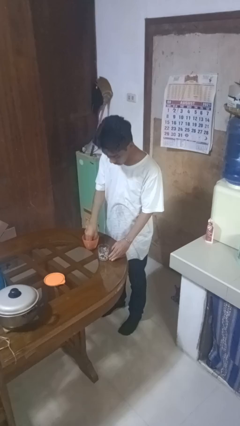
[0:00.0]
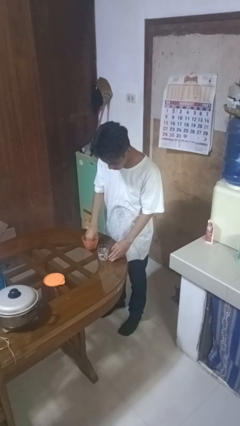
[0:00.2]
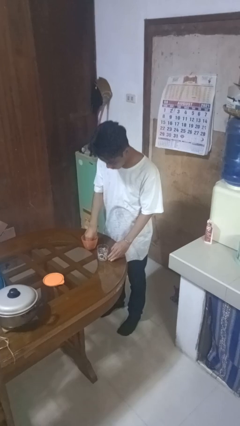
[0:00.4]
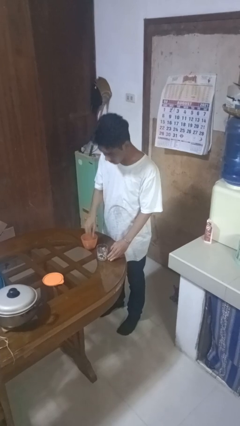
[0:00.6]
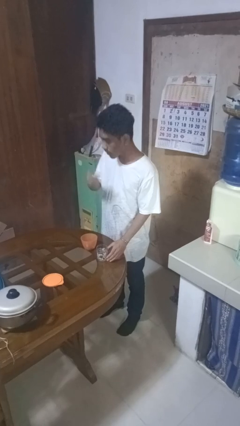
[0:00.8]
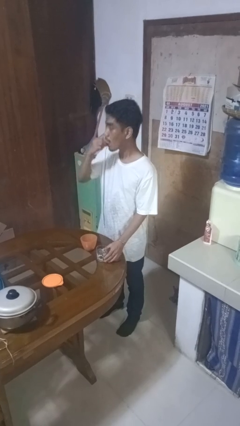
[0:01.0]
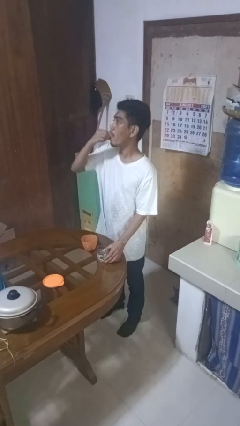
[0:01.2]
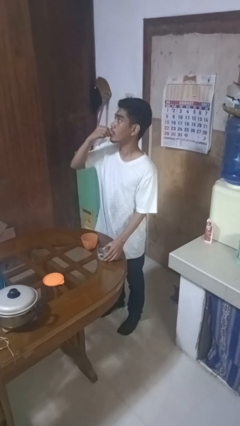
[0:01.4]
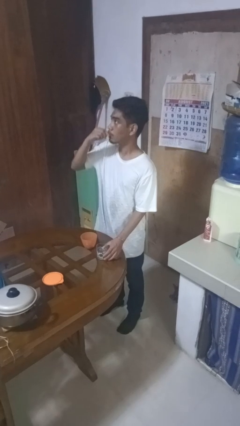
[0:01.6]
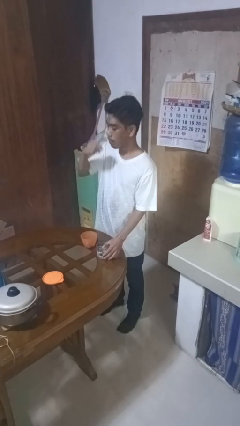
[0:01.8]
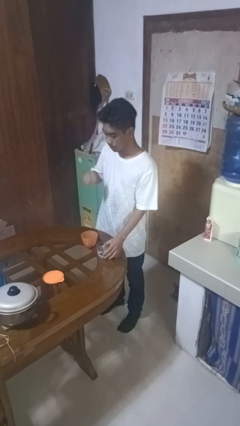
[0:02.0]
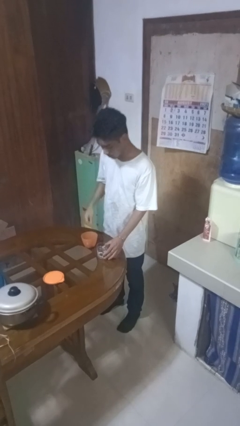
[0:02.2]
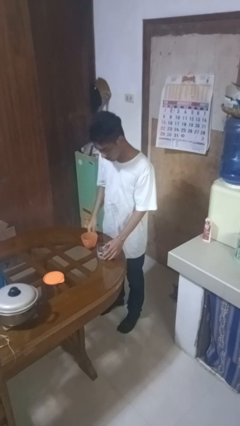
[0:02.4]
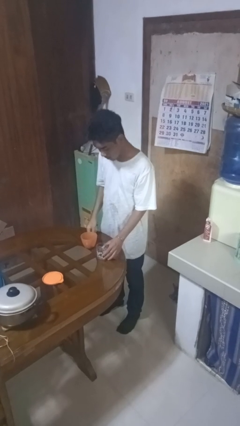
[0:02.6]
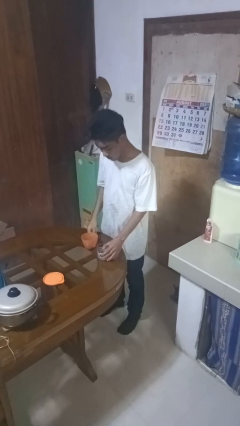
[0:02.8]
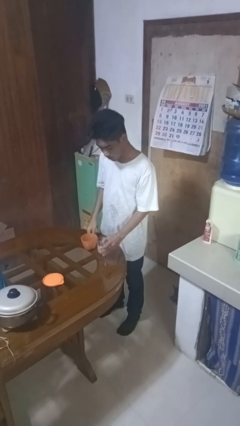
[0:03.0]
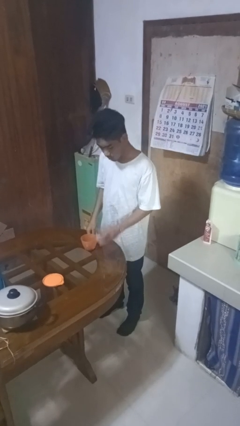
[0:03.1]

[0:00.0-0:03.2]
person takes medicine pills

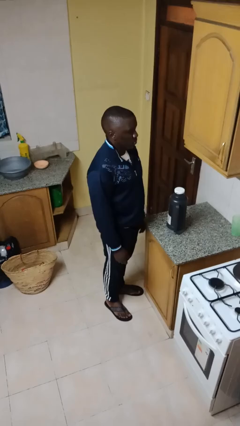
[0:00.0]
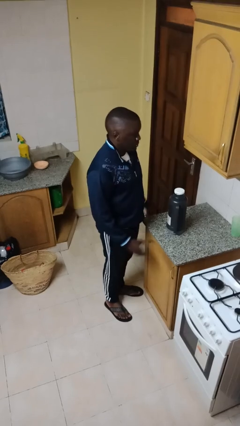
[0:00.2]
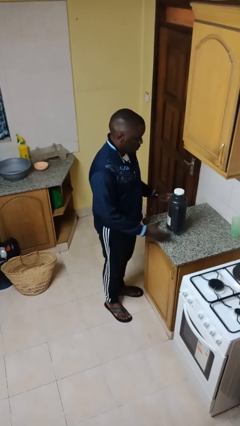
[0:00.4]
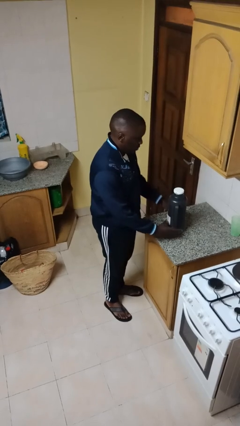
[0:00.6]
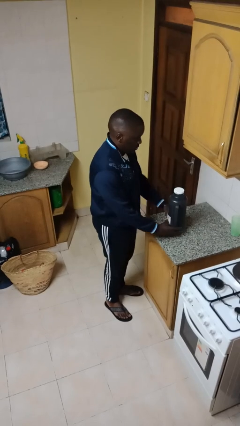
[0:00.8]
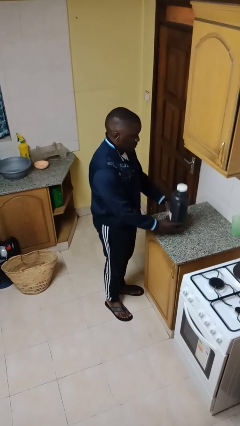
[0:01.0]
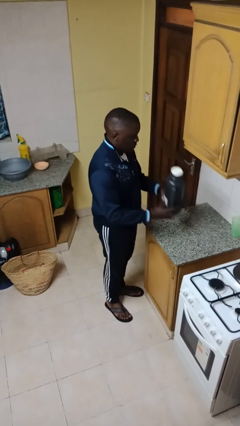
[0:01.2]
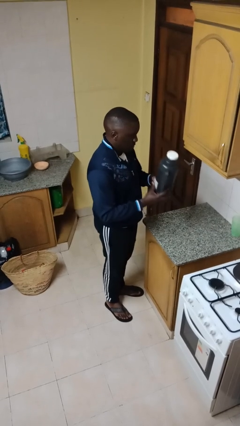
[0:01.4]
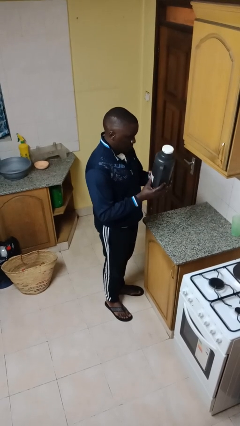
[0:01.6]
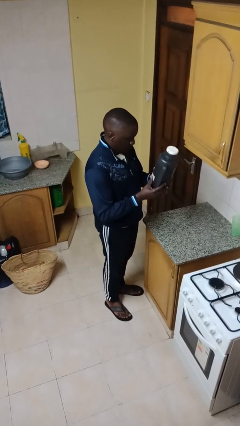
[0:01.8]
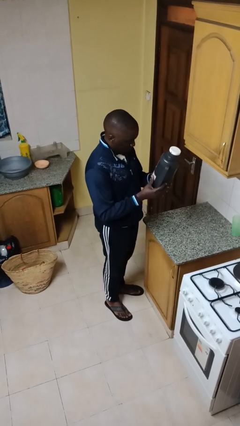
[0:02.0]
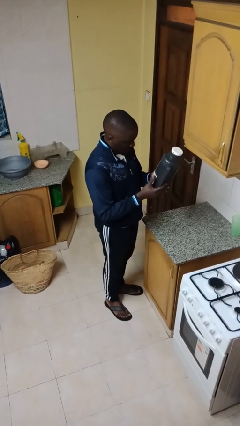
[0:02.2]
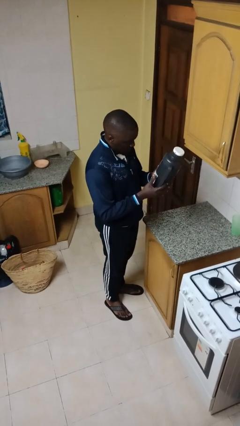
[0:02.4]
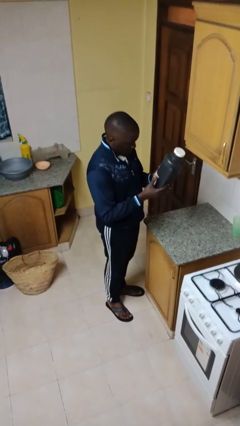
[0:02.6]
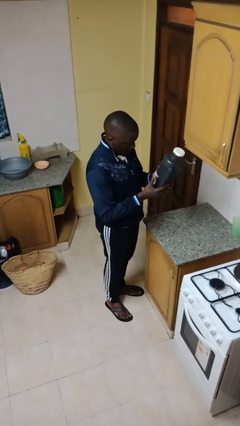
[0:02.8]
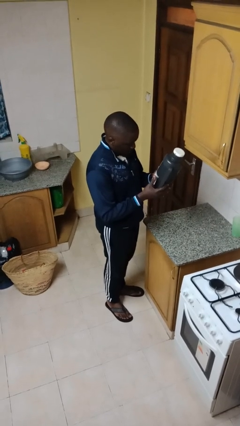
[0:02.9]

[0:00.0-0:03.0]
person picks up object from countertop

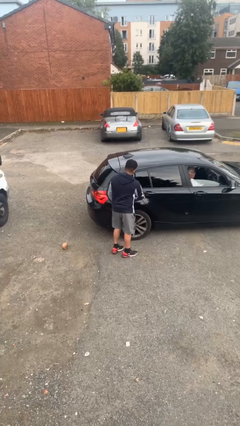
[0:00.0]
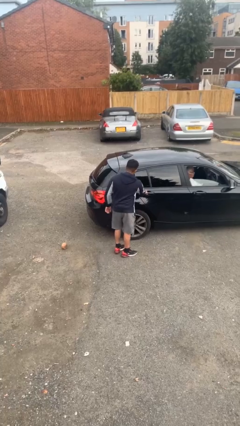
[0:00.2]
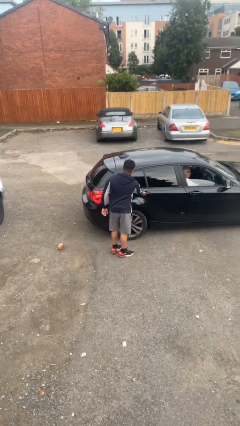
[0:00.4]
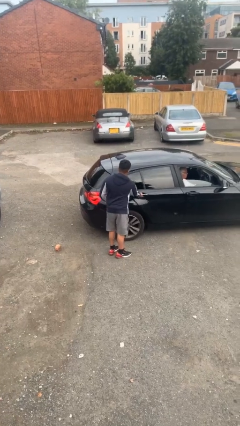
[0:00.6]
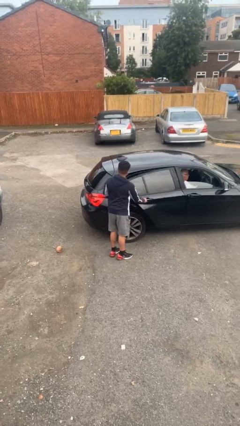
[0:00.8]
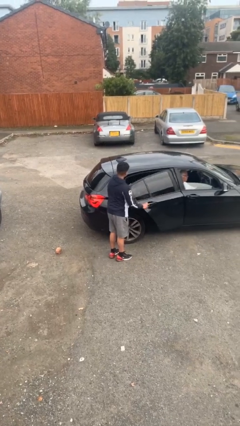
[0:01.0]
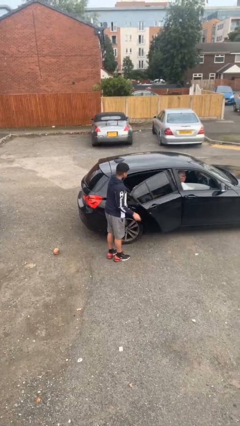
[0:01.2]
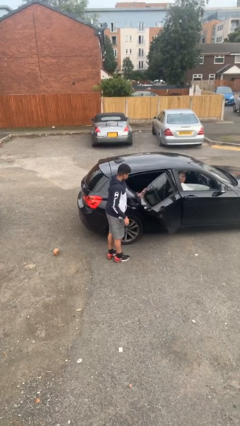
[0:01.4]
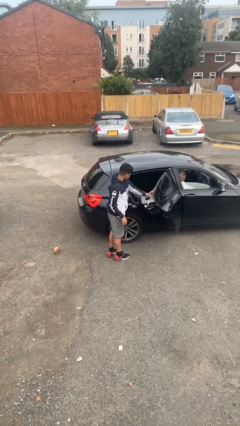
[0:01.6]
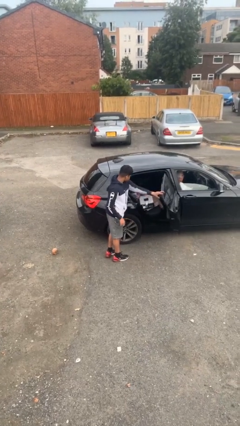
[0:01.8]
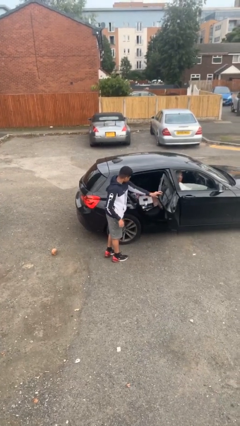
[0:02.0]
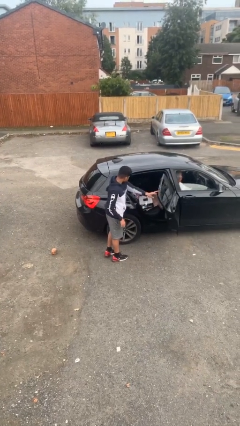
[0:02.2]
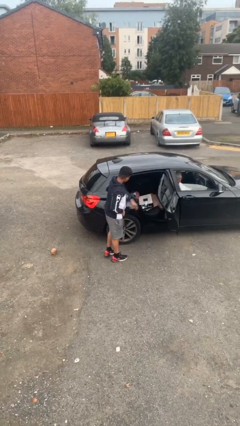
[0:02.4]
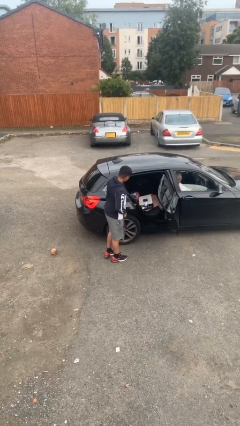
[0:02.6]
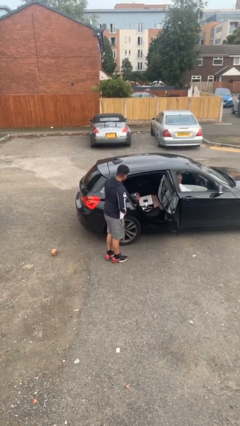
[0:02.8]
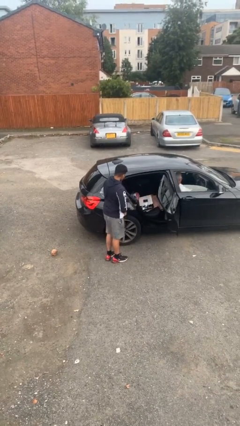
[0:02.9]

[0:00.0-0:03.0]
person opens car door

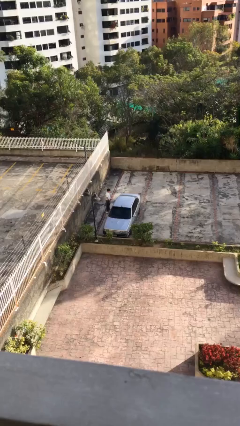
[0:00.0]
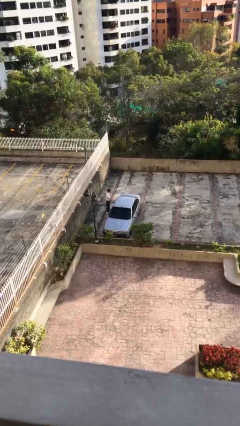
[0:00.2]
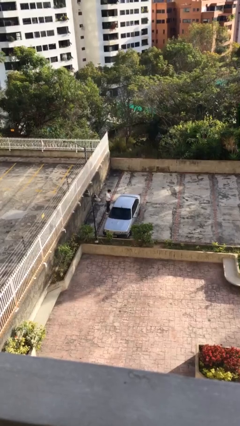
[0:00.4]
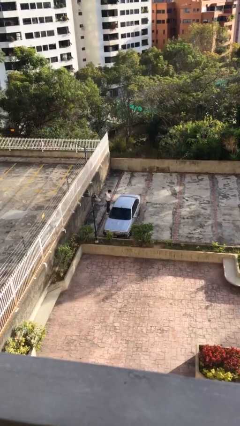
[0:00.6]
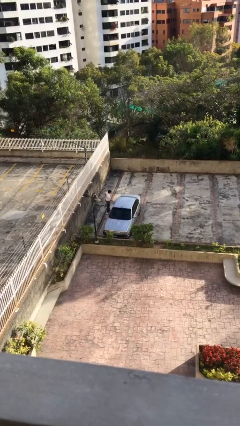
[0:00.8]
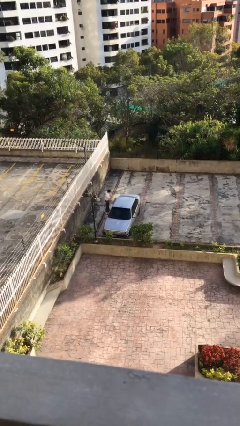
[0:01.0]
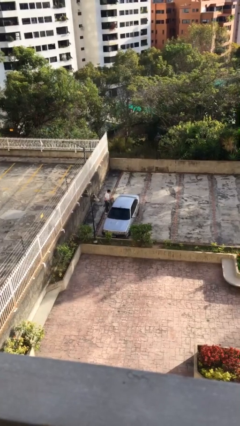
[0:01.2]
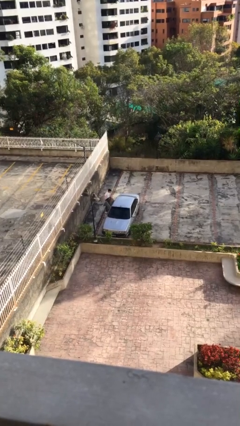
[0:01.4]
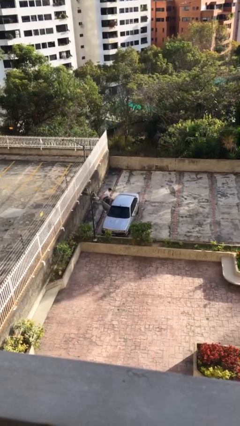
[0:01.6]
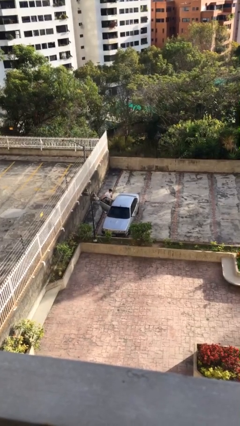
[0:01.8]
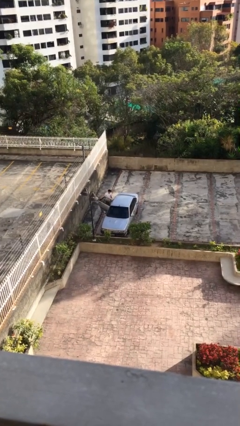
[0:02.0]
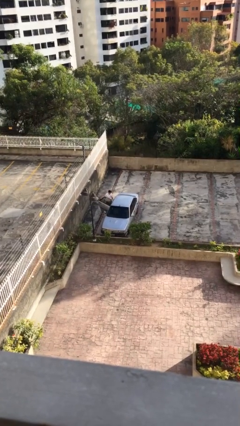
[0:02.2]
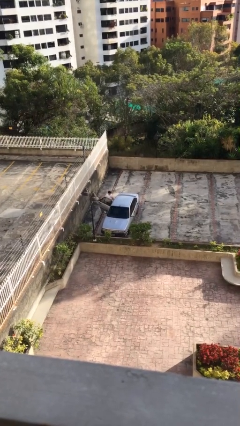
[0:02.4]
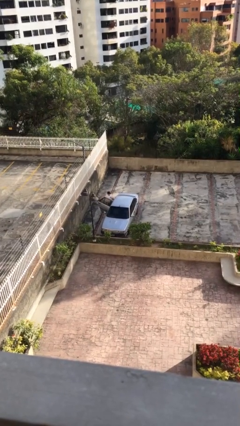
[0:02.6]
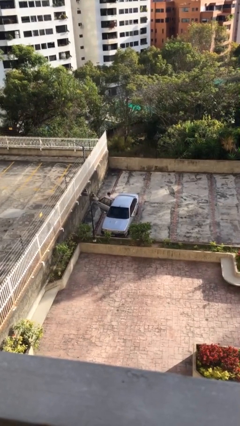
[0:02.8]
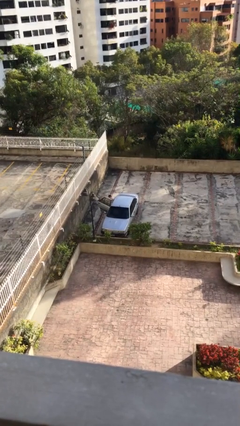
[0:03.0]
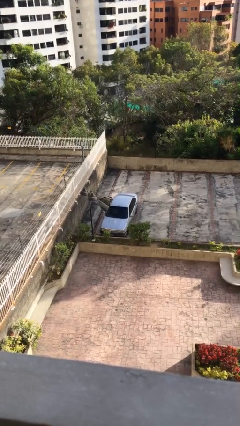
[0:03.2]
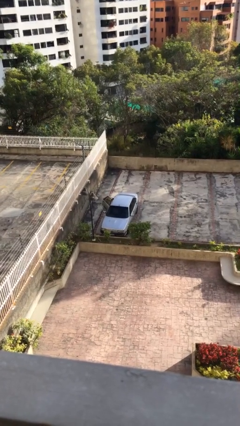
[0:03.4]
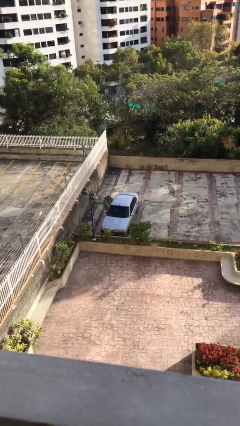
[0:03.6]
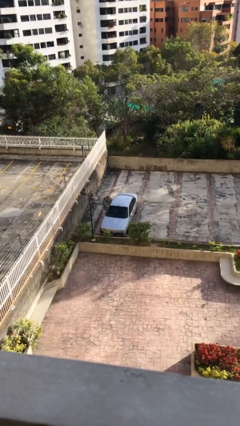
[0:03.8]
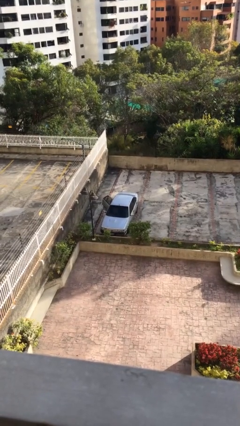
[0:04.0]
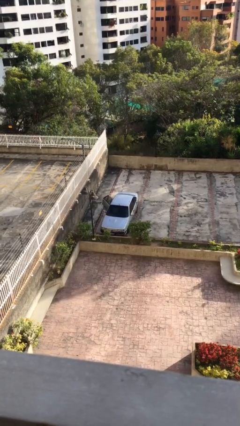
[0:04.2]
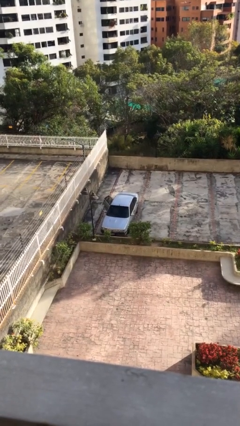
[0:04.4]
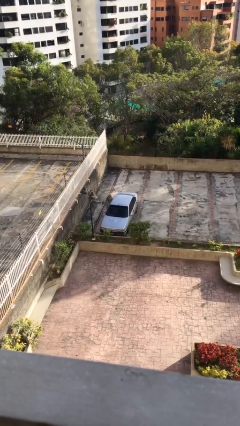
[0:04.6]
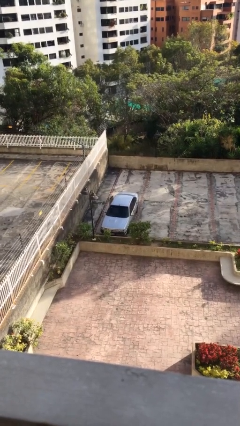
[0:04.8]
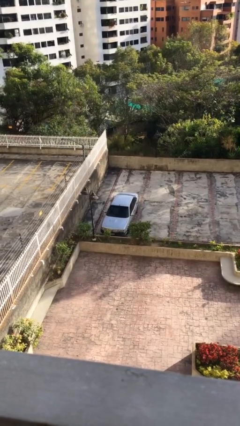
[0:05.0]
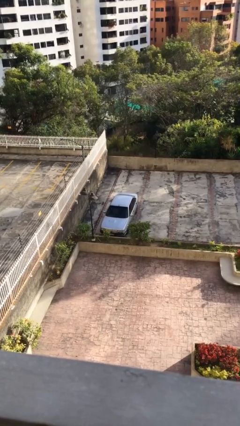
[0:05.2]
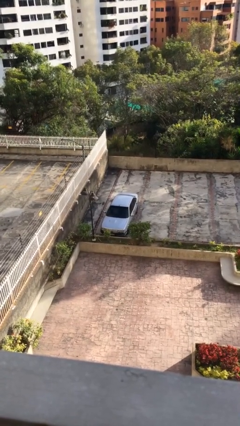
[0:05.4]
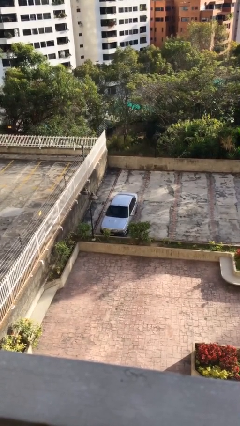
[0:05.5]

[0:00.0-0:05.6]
car picks up person

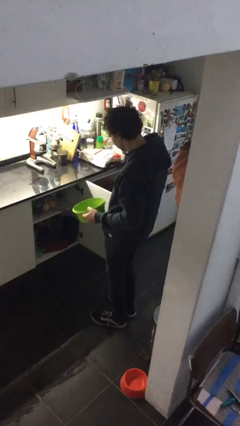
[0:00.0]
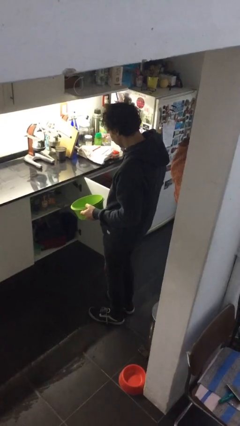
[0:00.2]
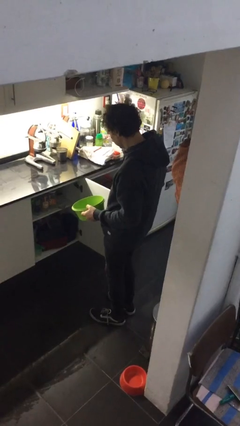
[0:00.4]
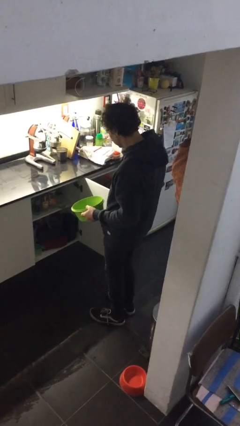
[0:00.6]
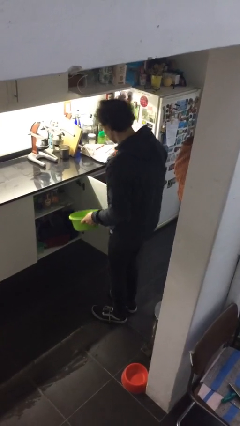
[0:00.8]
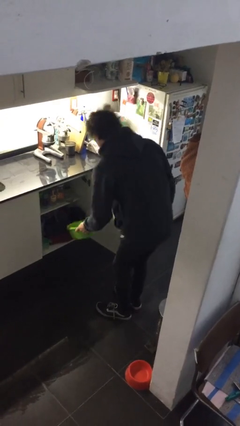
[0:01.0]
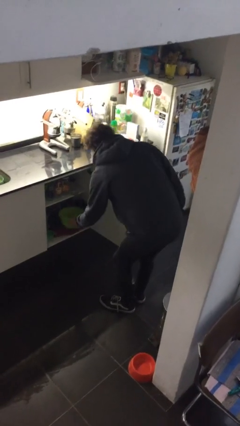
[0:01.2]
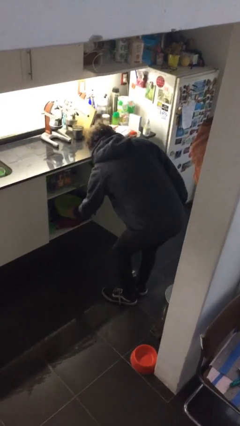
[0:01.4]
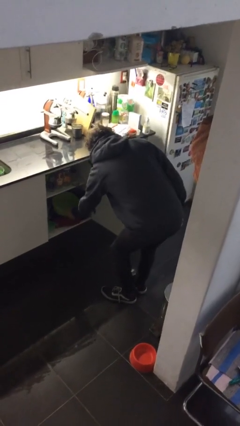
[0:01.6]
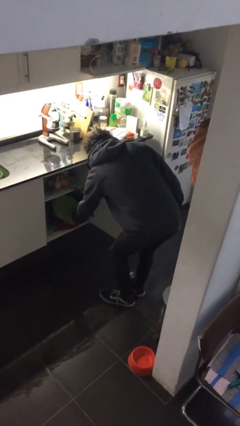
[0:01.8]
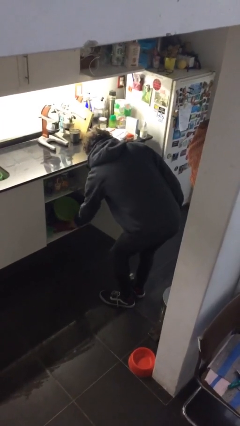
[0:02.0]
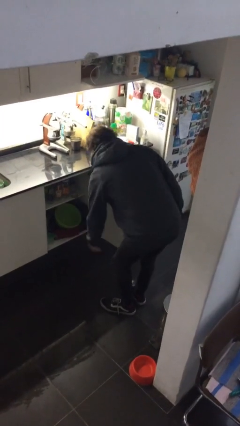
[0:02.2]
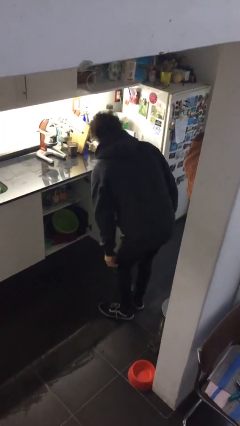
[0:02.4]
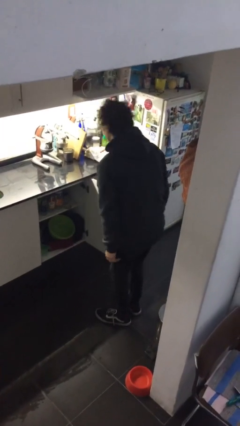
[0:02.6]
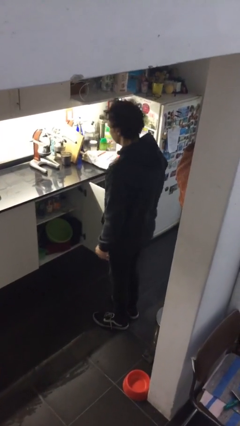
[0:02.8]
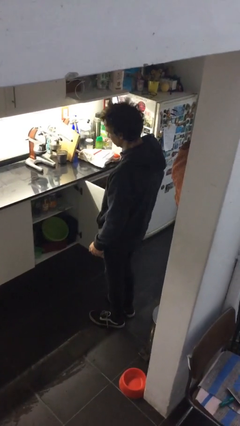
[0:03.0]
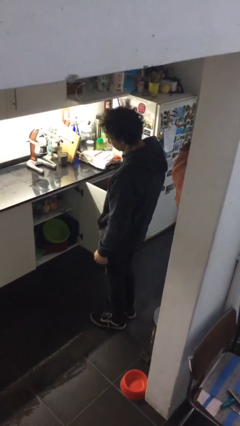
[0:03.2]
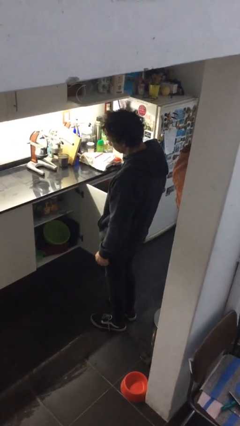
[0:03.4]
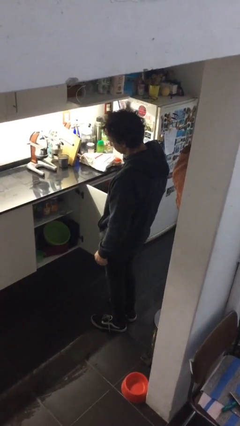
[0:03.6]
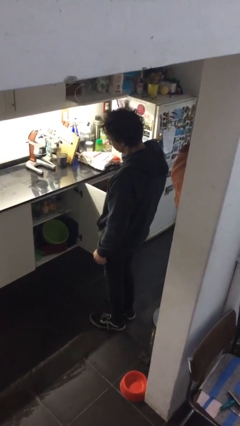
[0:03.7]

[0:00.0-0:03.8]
person puts down object into cabinet
